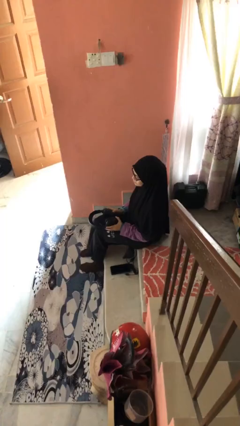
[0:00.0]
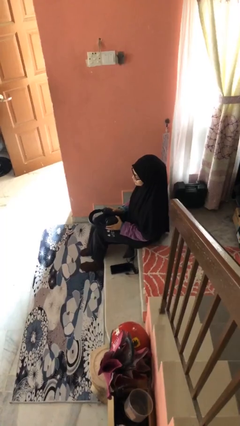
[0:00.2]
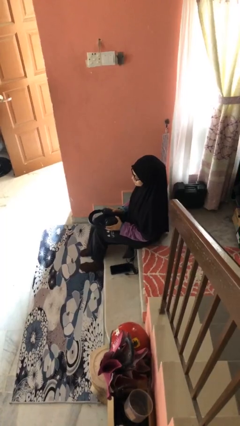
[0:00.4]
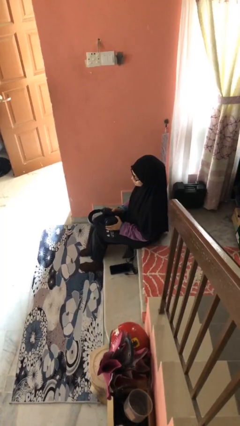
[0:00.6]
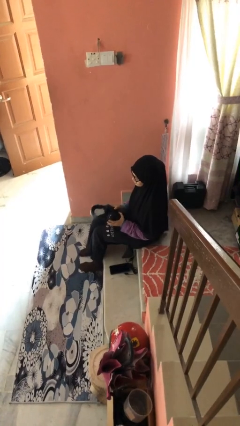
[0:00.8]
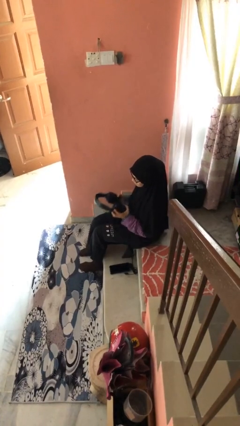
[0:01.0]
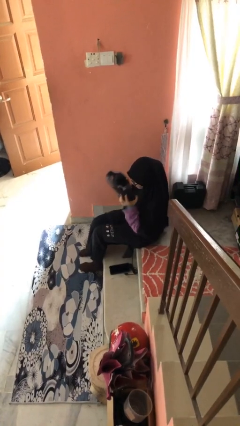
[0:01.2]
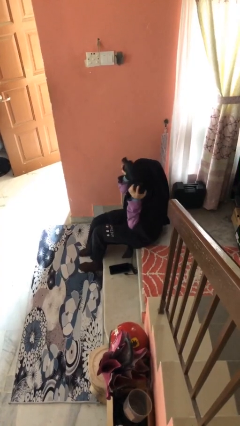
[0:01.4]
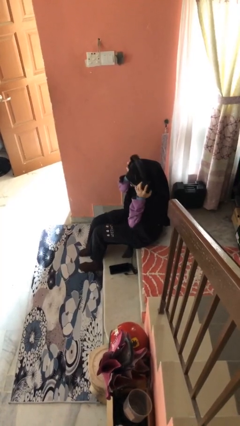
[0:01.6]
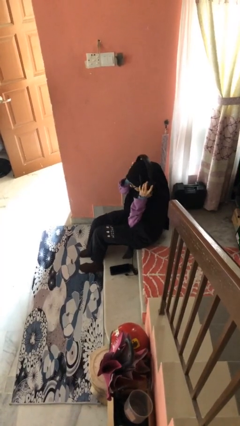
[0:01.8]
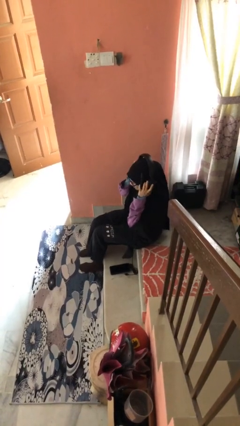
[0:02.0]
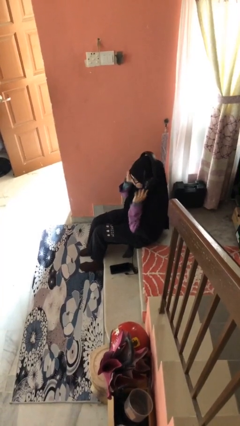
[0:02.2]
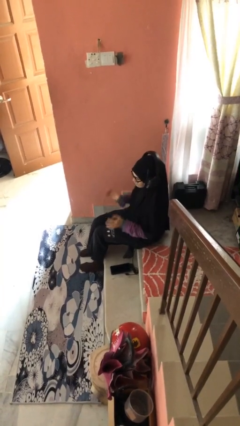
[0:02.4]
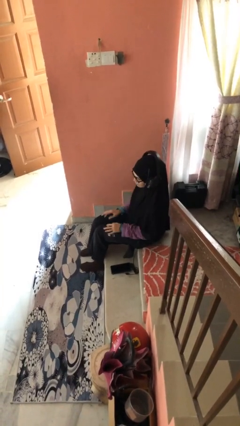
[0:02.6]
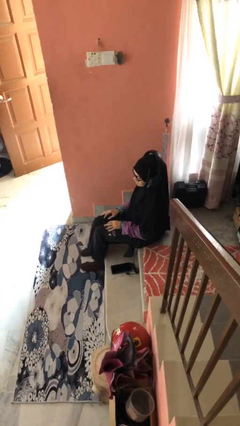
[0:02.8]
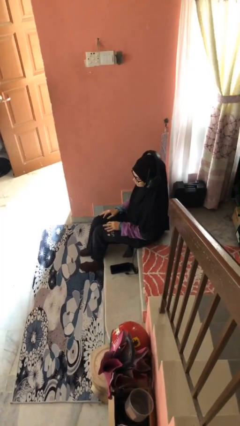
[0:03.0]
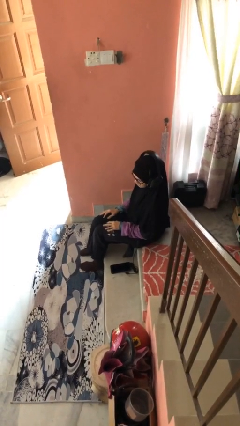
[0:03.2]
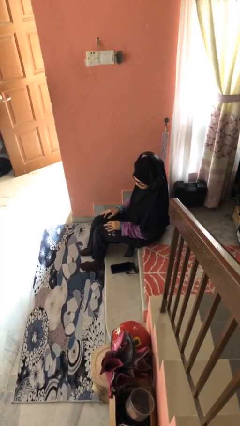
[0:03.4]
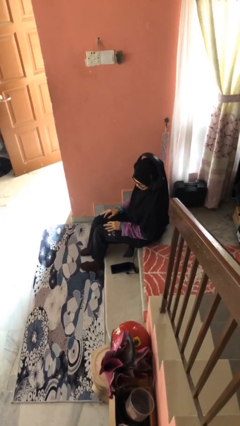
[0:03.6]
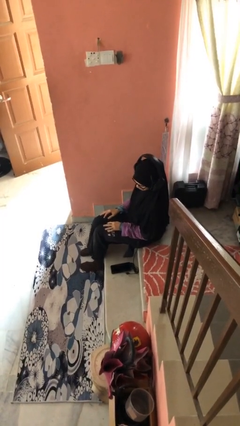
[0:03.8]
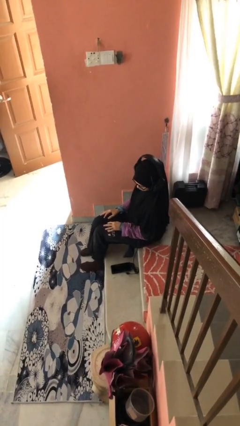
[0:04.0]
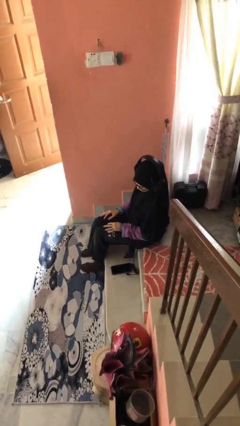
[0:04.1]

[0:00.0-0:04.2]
person puts on headphones

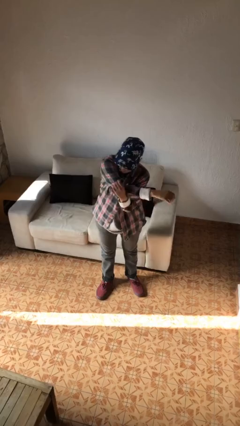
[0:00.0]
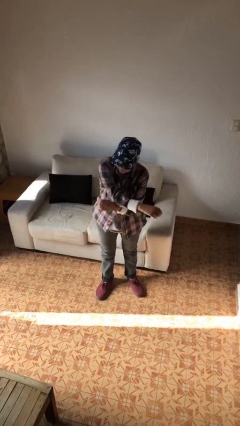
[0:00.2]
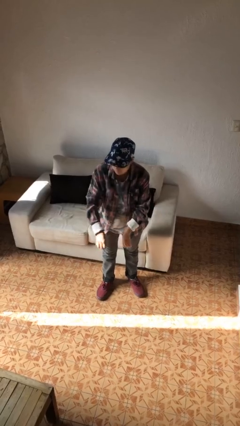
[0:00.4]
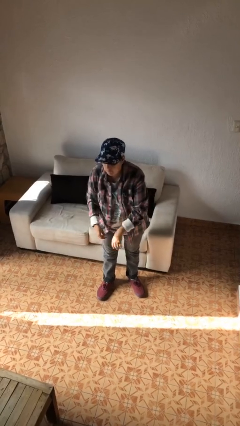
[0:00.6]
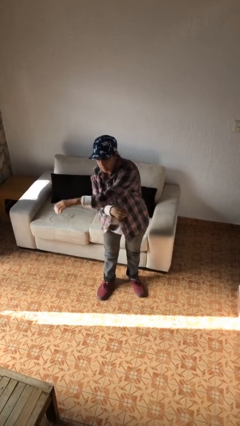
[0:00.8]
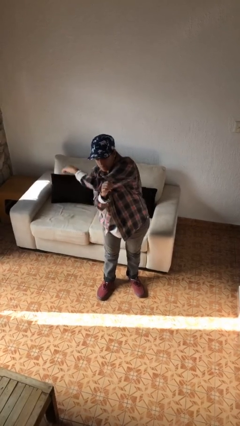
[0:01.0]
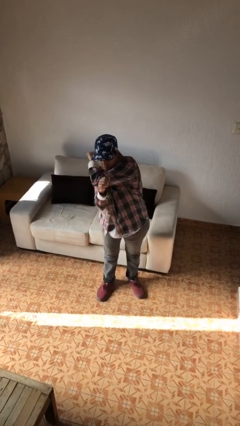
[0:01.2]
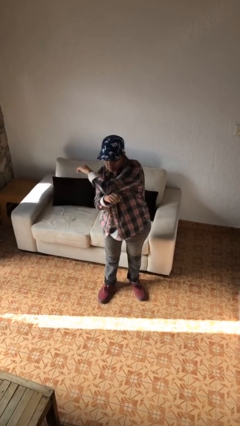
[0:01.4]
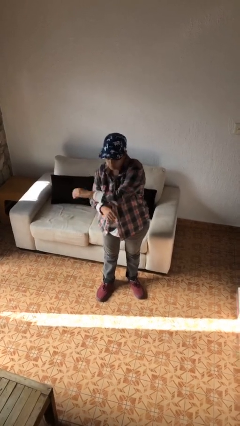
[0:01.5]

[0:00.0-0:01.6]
person stretches arms to side

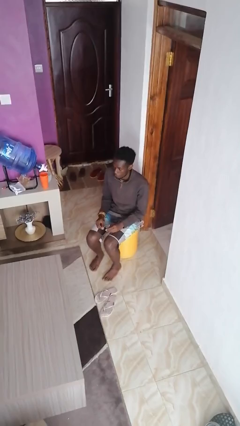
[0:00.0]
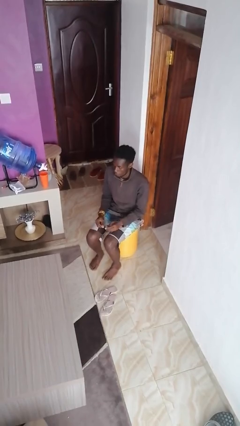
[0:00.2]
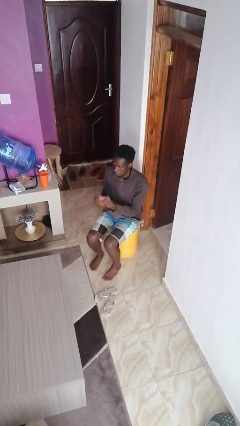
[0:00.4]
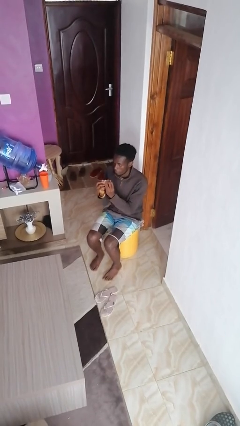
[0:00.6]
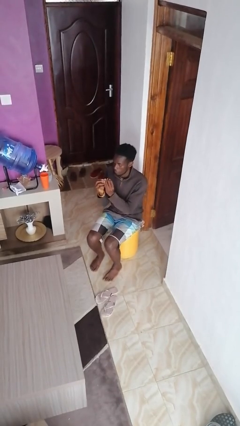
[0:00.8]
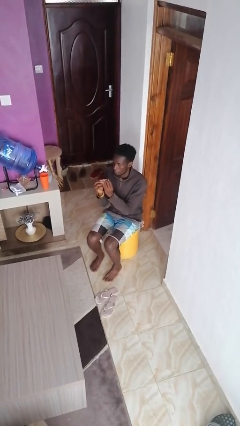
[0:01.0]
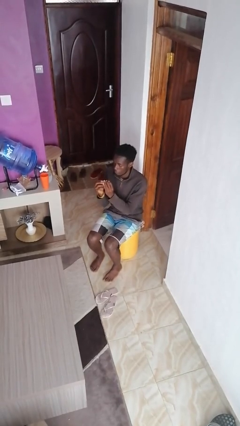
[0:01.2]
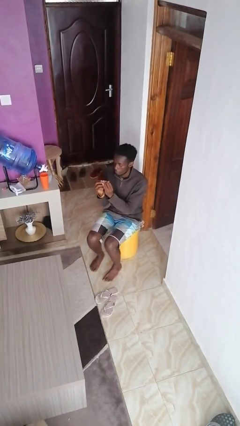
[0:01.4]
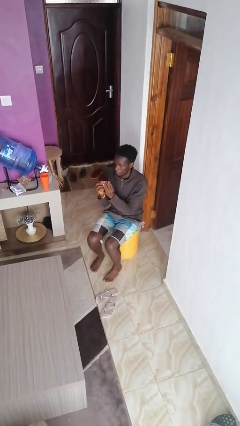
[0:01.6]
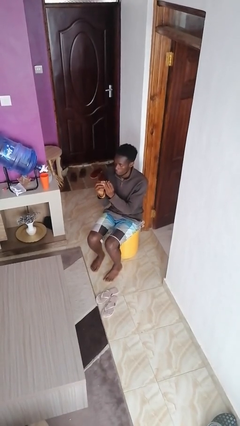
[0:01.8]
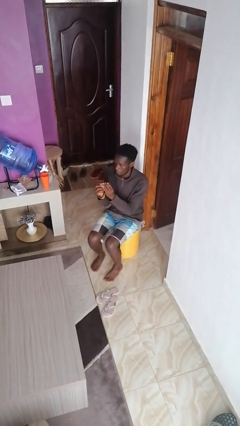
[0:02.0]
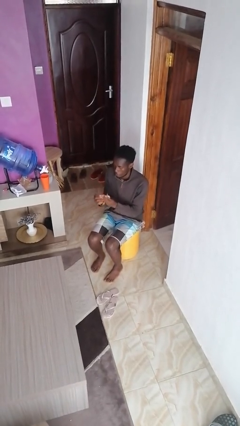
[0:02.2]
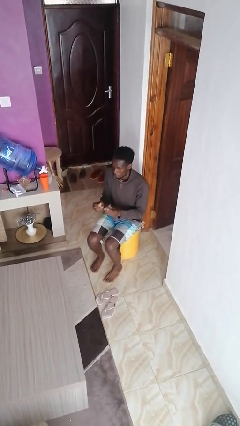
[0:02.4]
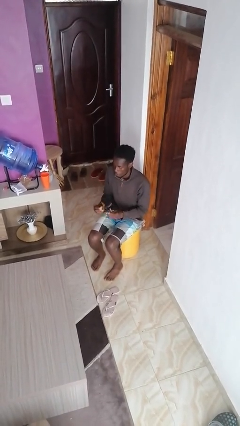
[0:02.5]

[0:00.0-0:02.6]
person clips fingernails

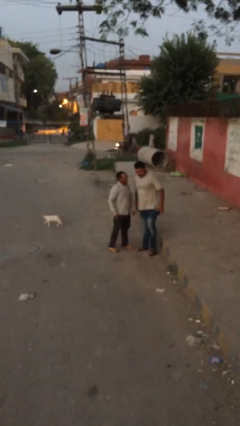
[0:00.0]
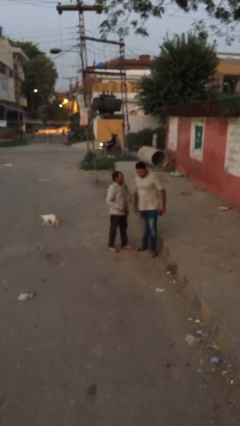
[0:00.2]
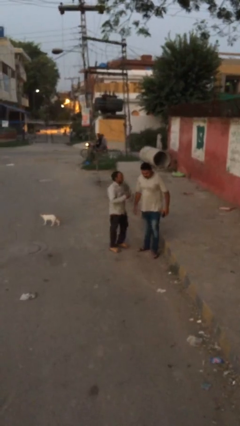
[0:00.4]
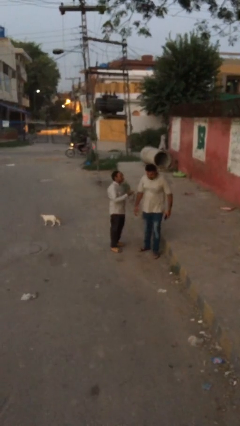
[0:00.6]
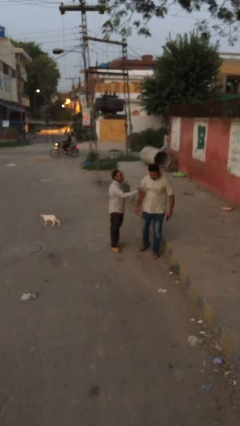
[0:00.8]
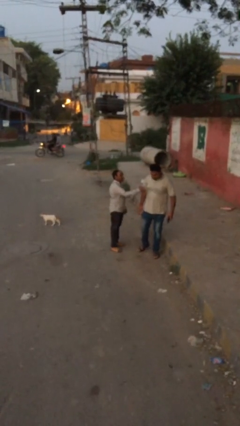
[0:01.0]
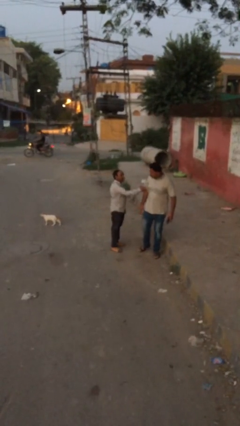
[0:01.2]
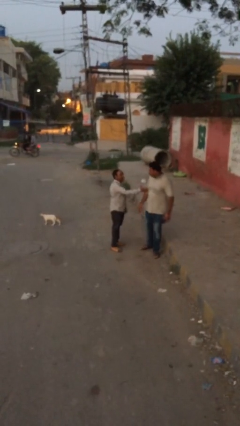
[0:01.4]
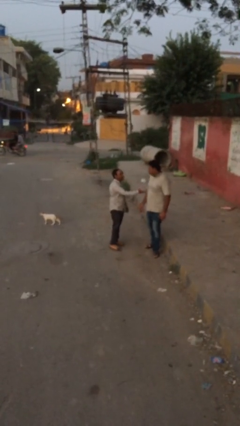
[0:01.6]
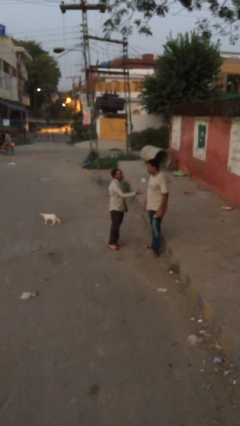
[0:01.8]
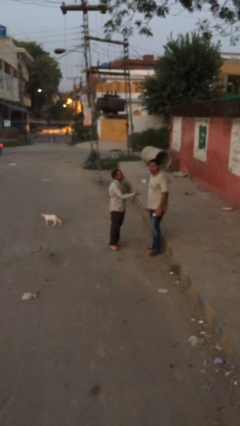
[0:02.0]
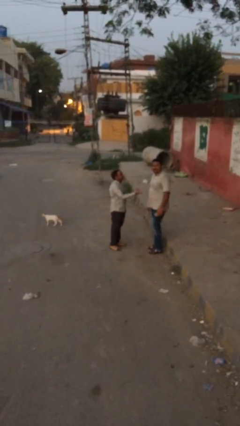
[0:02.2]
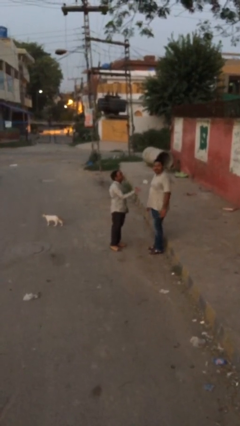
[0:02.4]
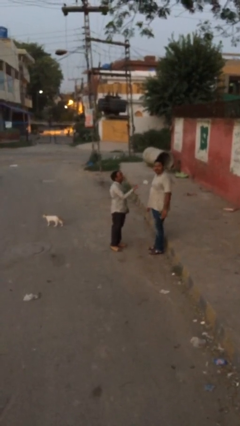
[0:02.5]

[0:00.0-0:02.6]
person talks to person

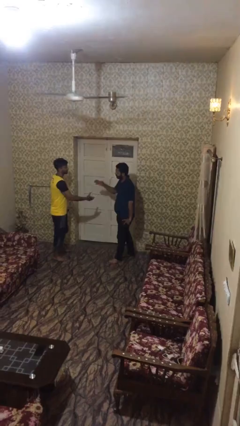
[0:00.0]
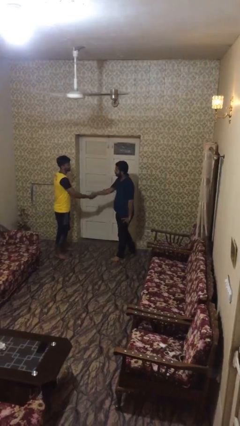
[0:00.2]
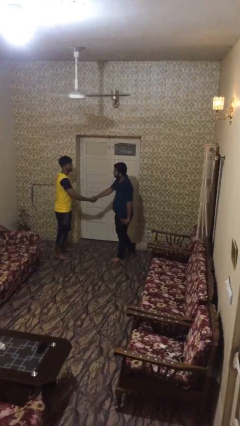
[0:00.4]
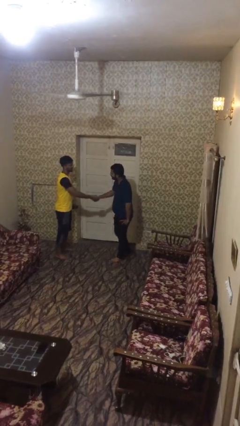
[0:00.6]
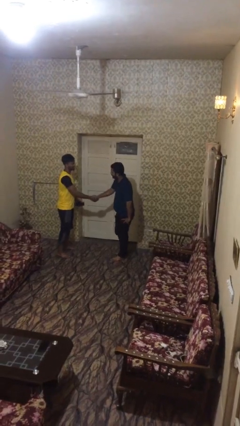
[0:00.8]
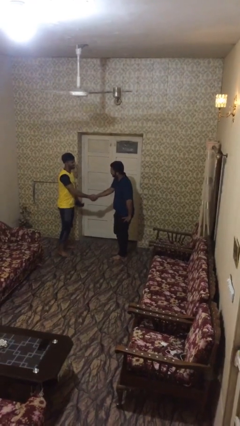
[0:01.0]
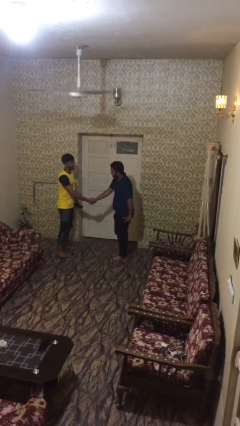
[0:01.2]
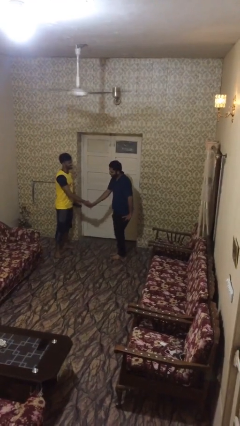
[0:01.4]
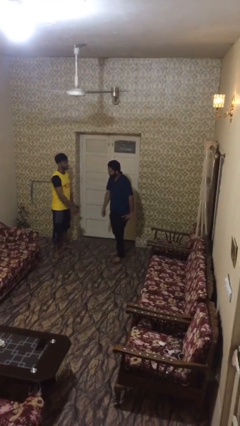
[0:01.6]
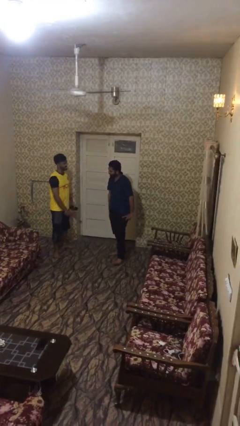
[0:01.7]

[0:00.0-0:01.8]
person shakes hand

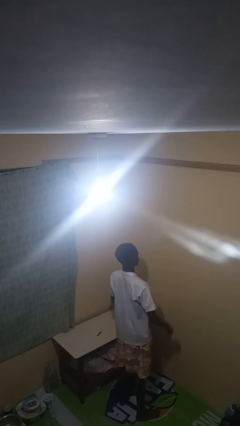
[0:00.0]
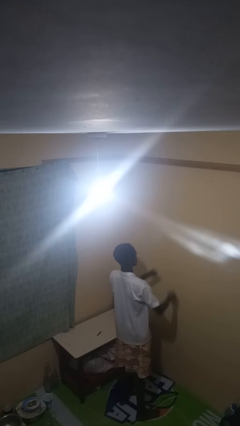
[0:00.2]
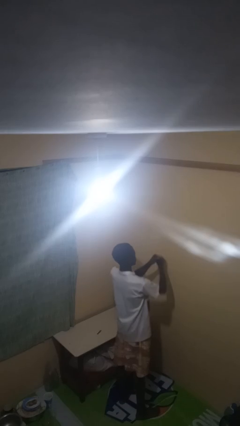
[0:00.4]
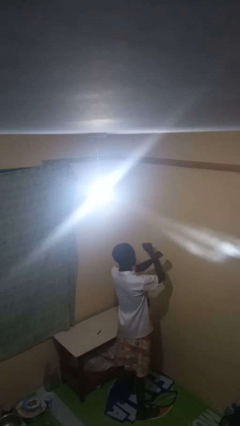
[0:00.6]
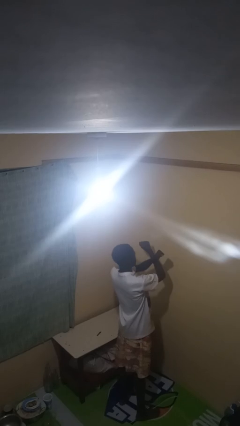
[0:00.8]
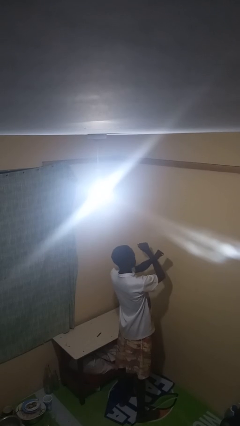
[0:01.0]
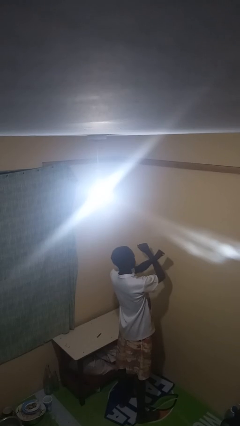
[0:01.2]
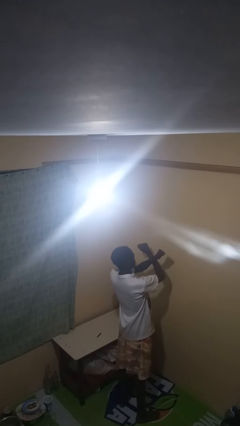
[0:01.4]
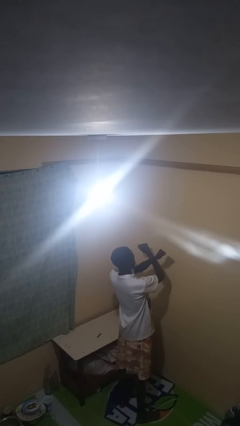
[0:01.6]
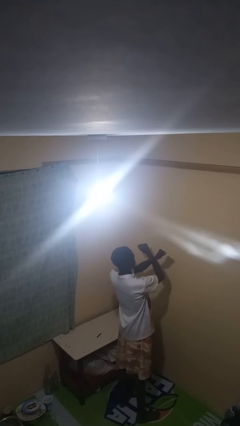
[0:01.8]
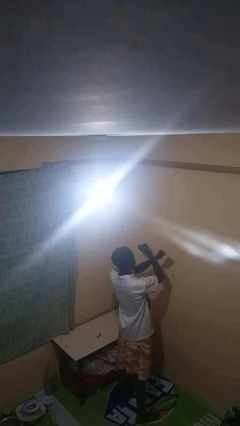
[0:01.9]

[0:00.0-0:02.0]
person gestures arms x

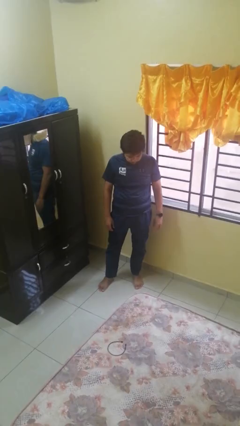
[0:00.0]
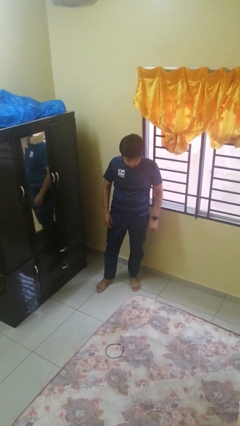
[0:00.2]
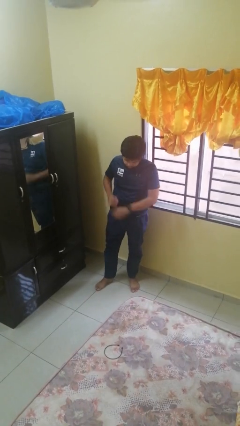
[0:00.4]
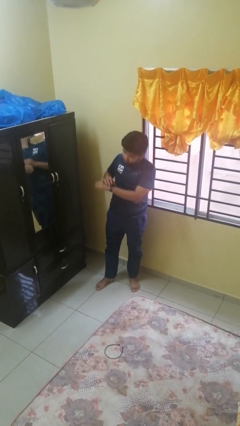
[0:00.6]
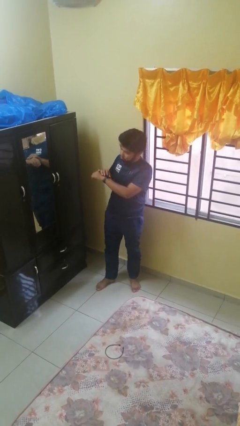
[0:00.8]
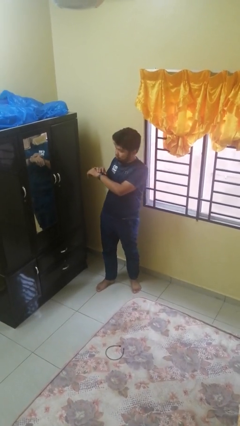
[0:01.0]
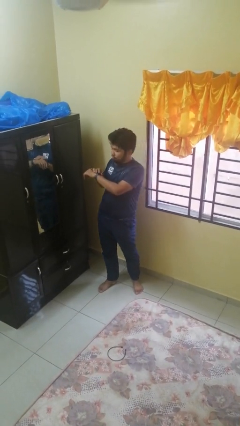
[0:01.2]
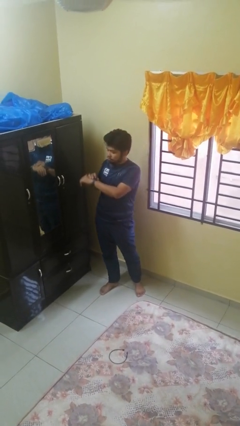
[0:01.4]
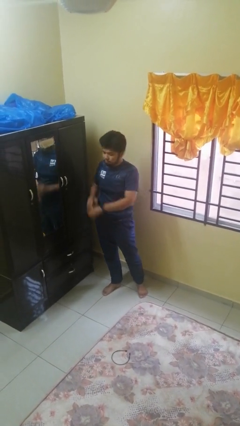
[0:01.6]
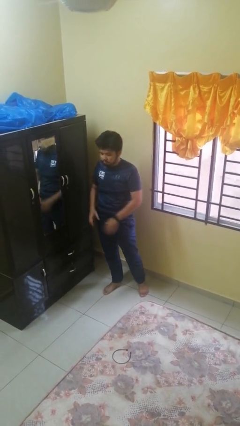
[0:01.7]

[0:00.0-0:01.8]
person looks at wristwatch

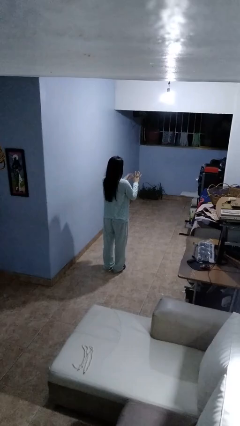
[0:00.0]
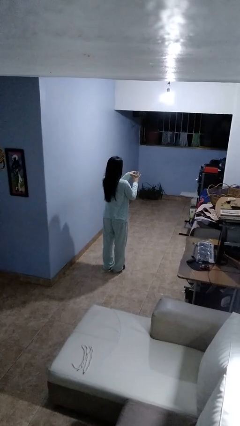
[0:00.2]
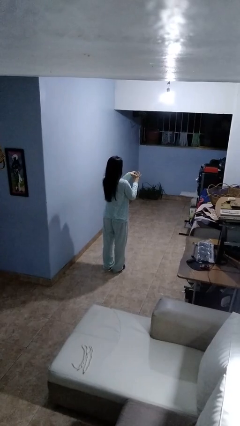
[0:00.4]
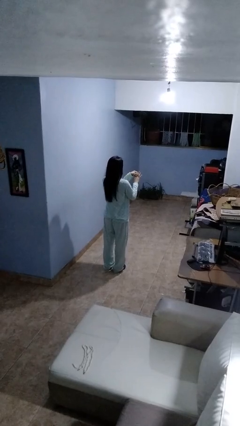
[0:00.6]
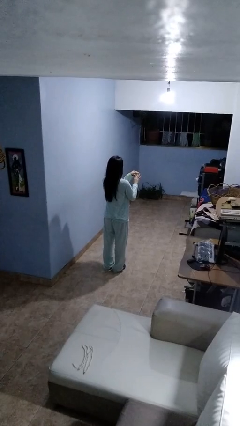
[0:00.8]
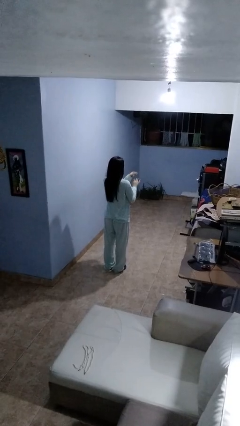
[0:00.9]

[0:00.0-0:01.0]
person takes off ring
